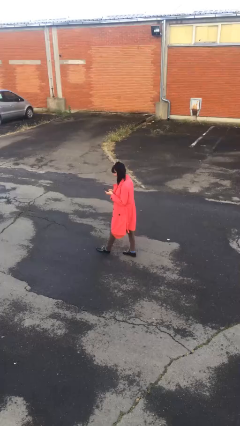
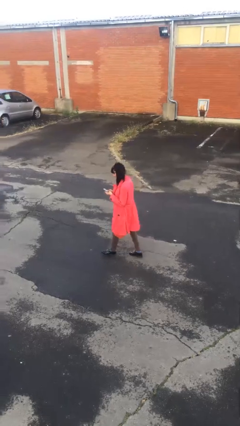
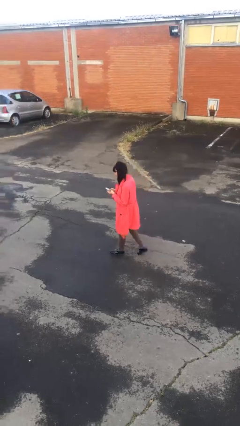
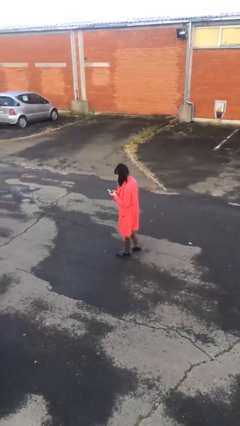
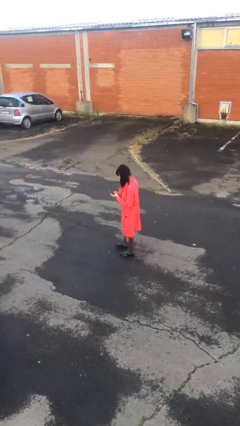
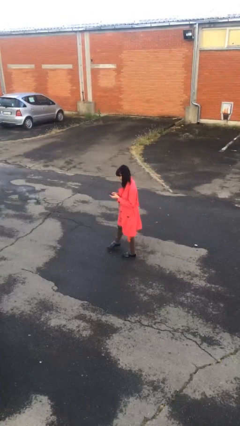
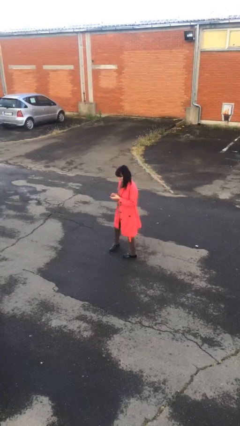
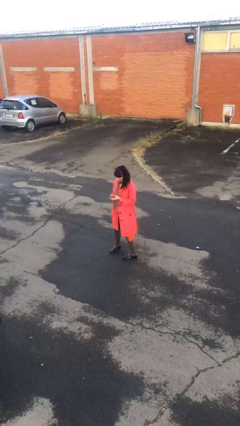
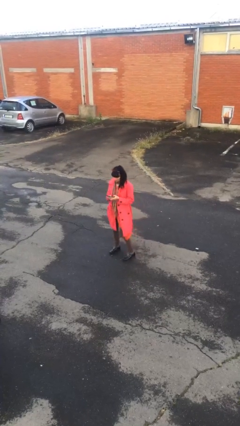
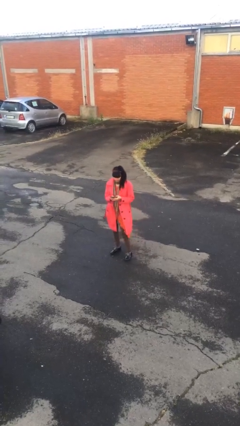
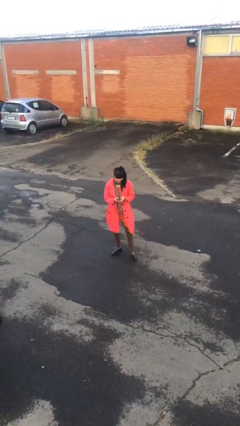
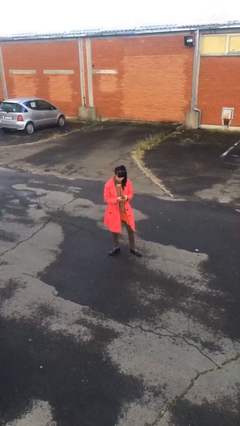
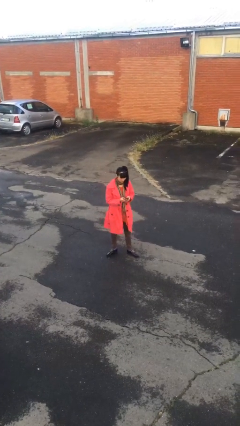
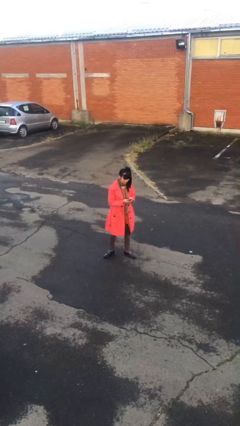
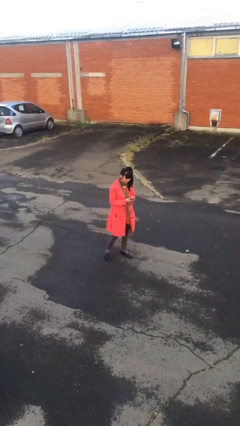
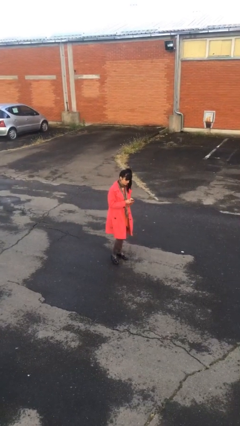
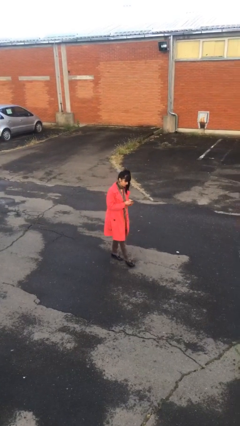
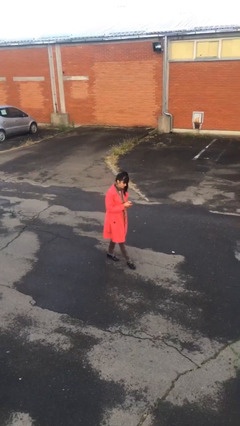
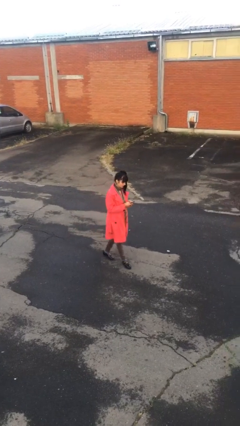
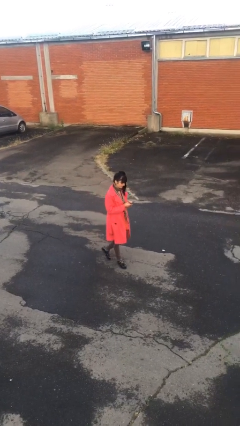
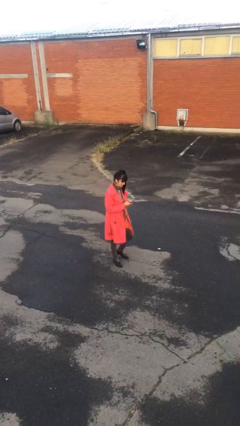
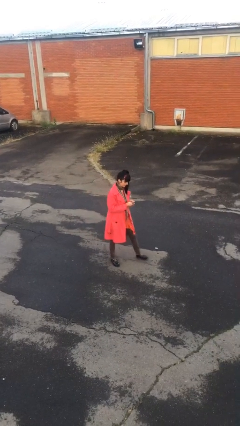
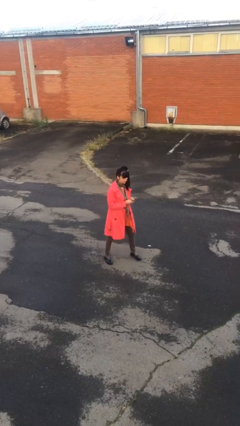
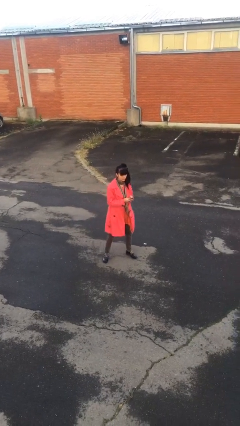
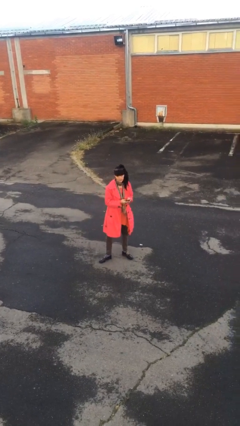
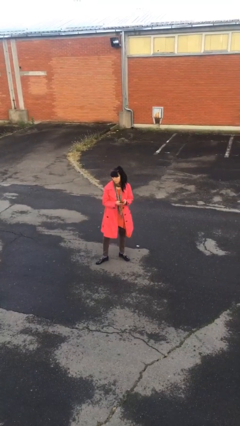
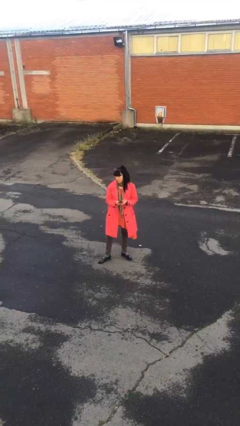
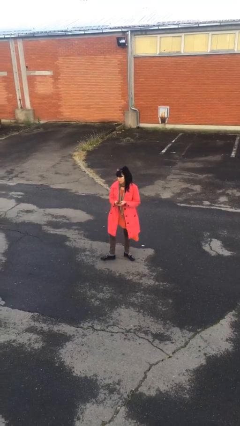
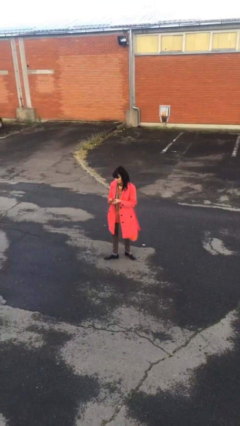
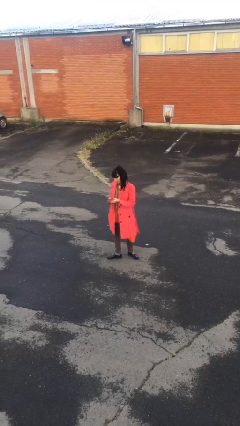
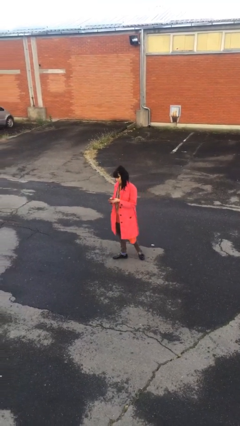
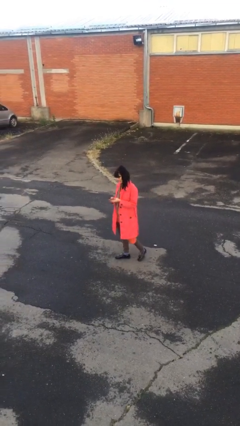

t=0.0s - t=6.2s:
person texts on phone

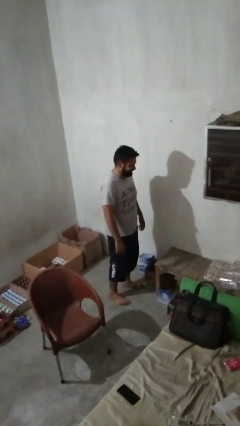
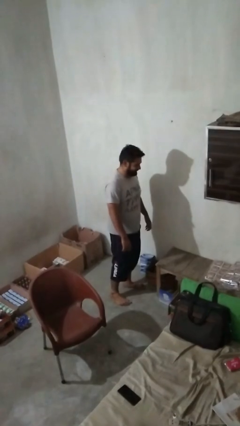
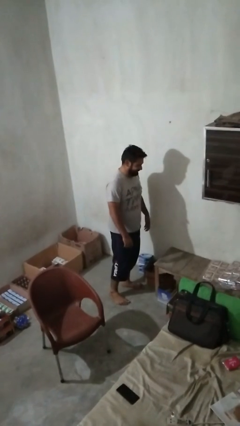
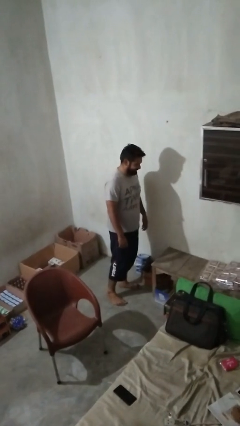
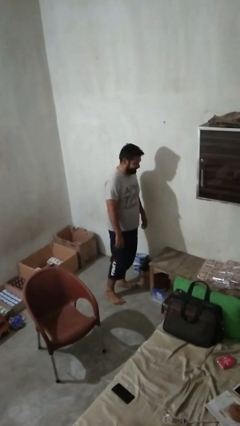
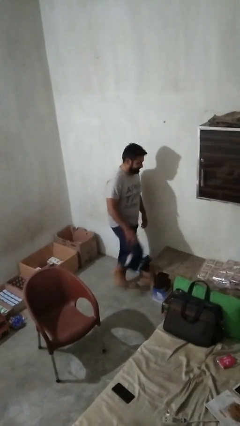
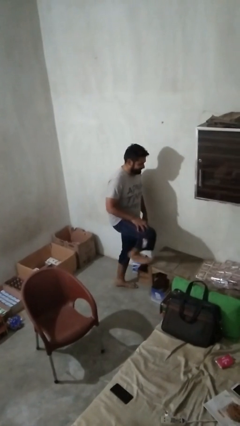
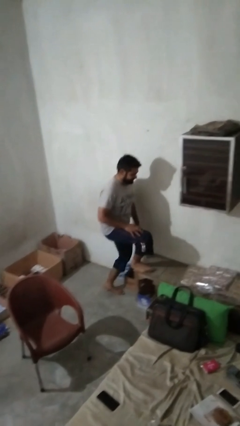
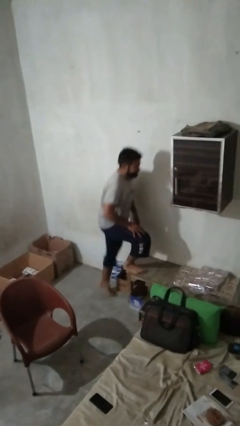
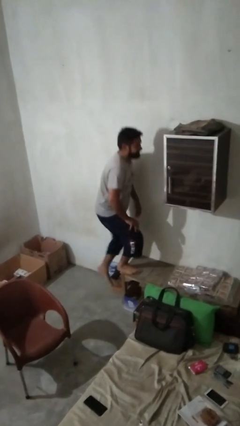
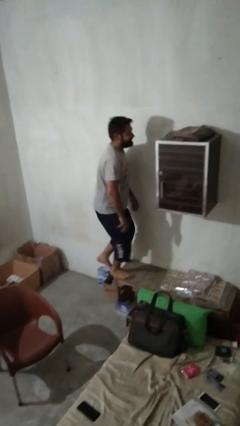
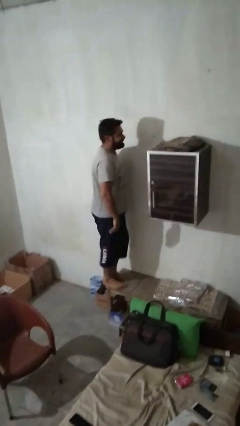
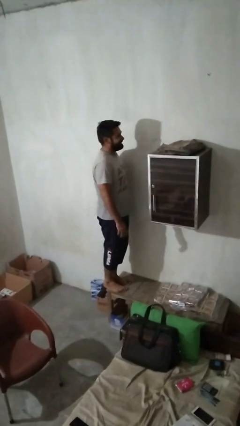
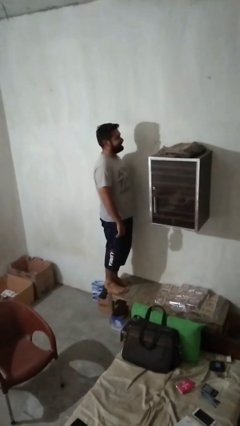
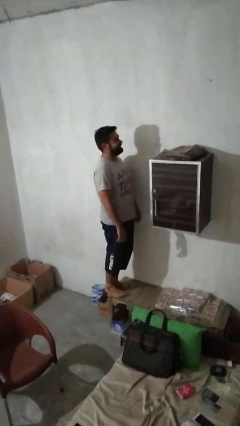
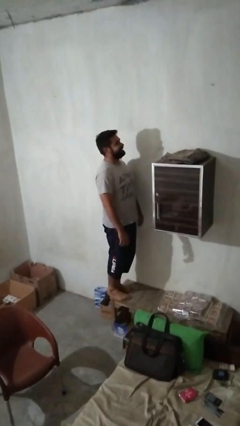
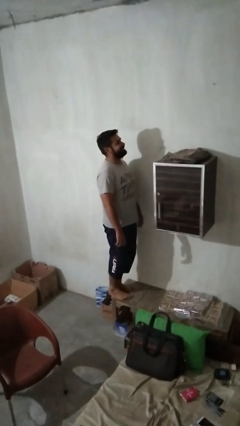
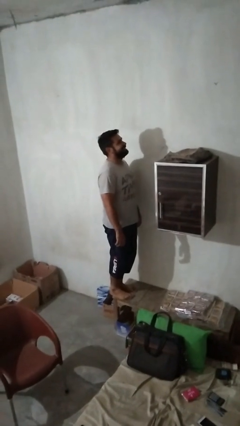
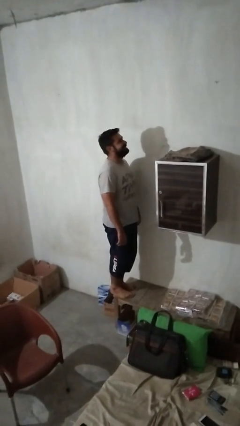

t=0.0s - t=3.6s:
person climbs on table

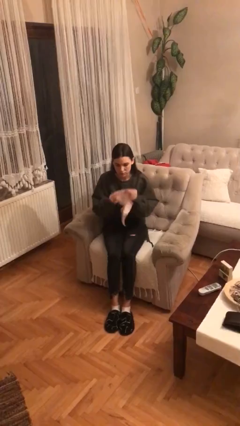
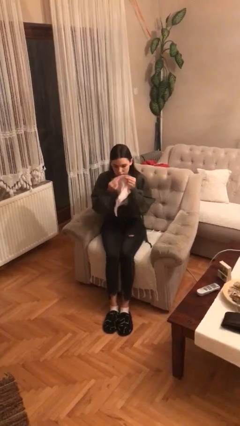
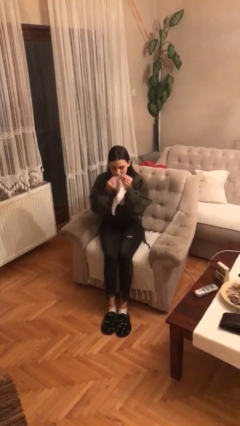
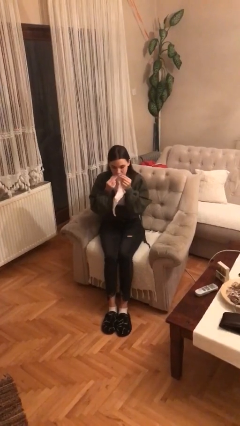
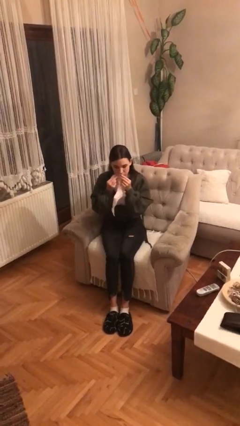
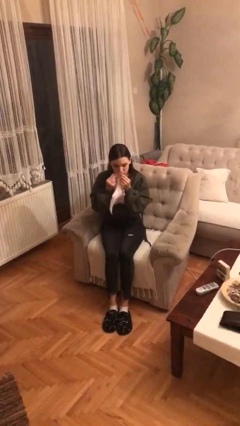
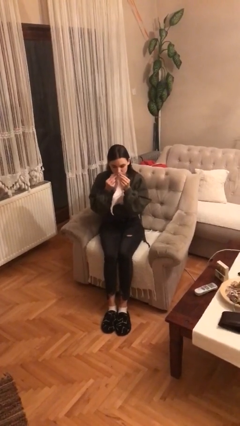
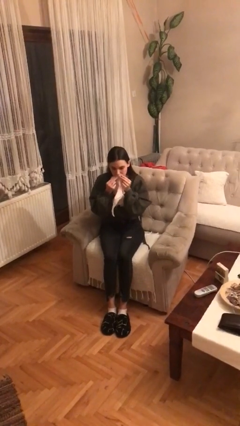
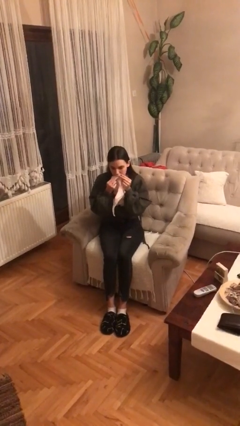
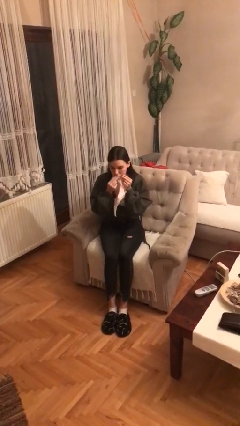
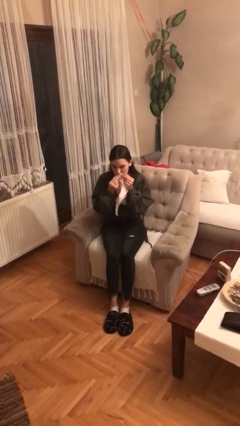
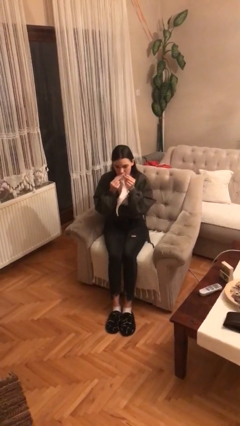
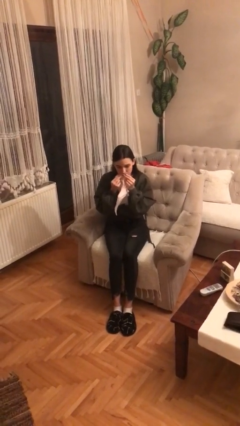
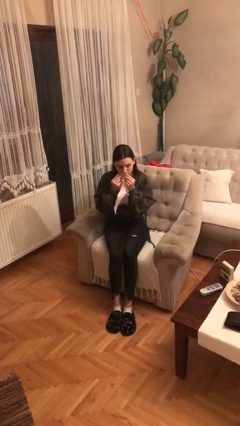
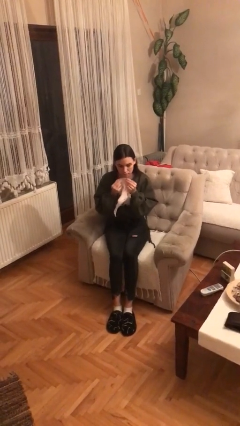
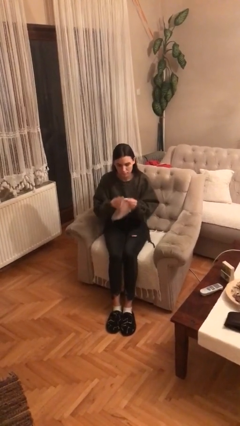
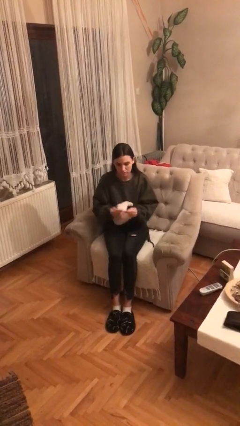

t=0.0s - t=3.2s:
person wipes mouth with napkin

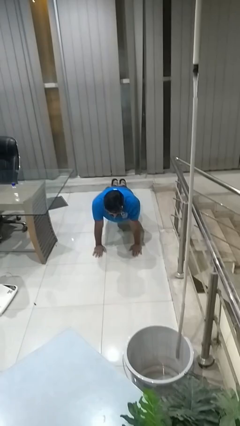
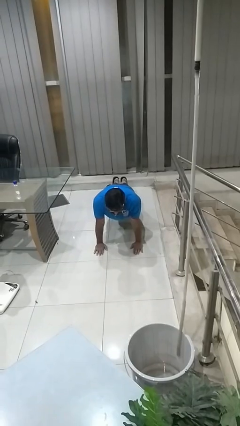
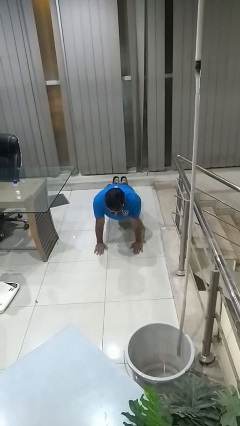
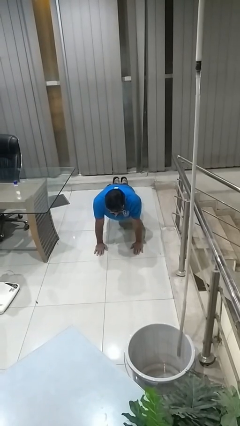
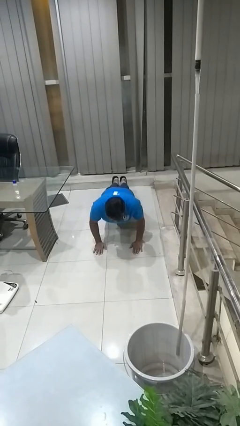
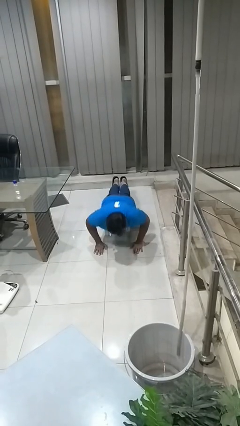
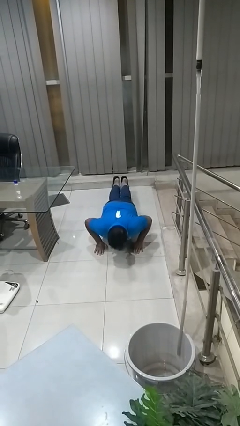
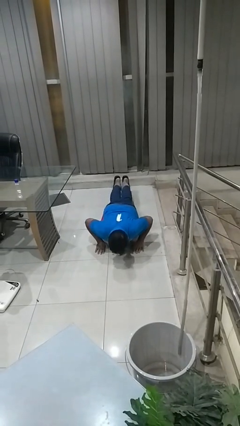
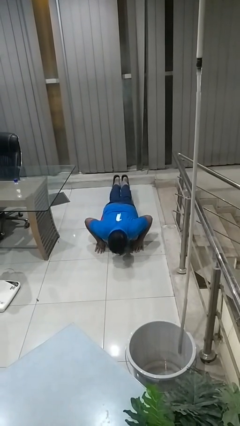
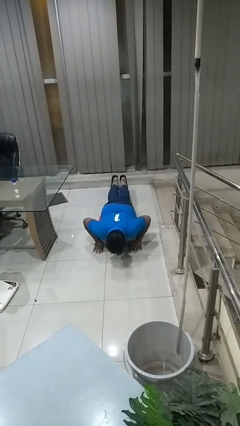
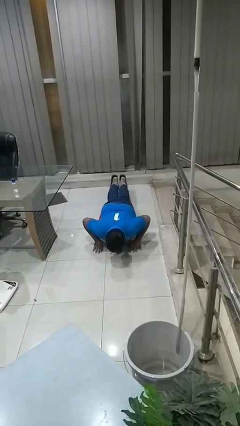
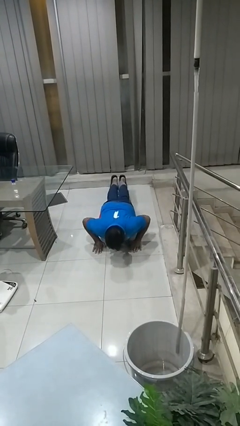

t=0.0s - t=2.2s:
person exercises with pushup

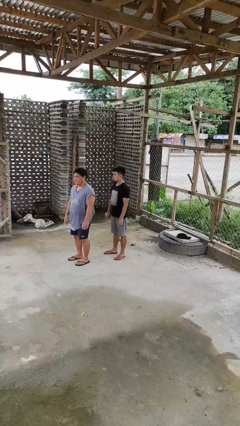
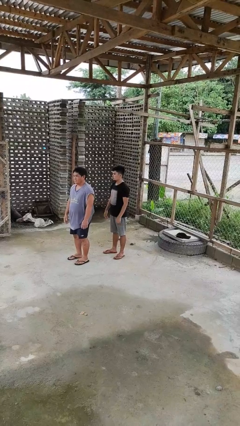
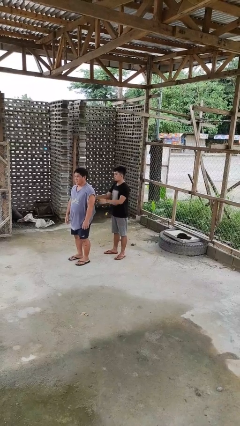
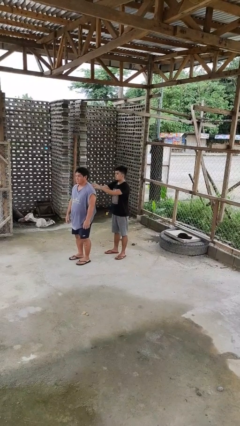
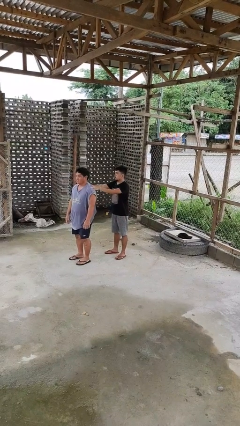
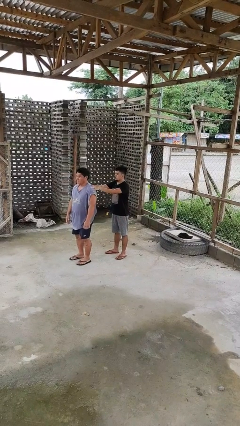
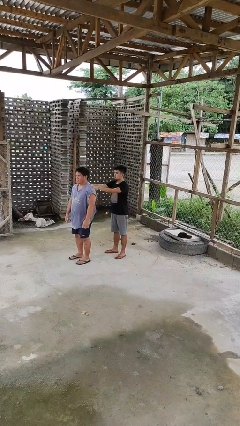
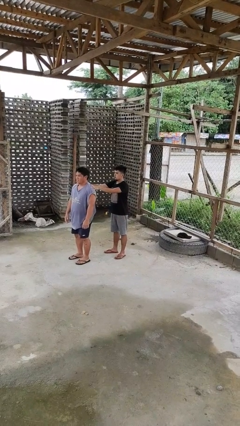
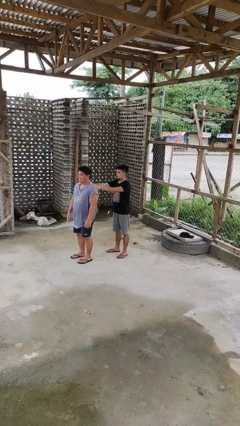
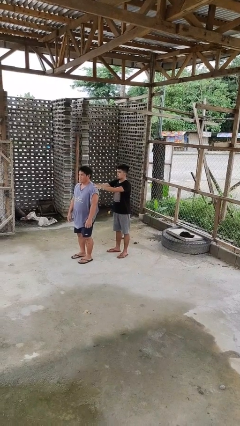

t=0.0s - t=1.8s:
person grabs person by shoulder

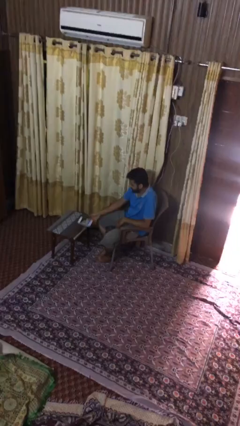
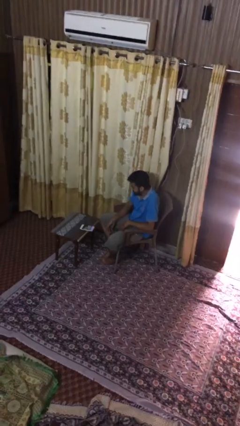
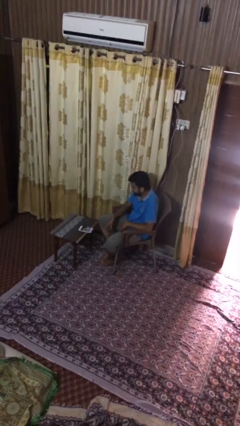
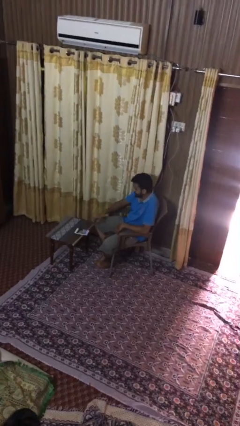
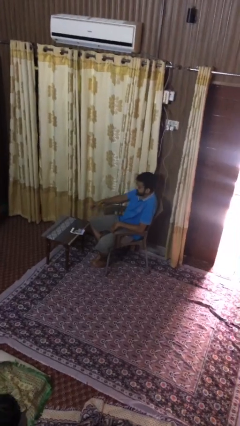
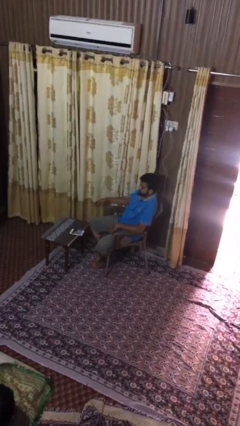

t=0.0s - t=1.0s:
person puts down object on table
